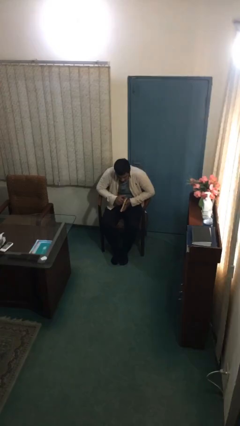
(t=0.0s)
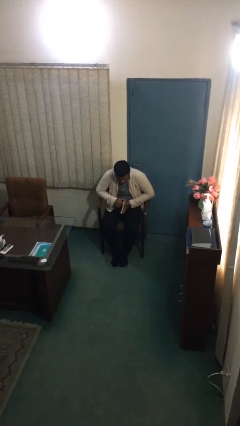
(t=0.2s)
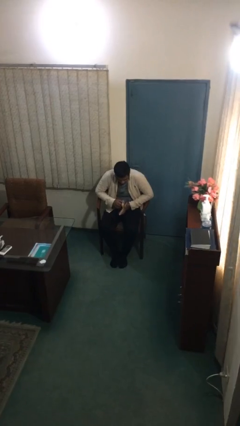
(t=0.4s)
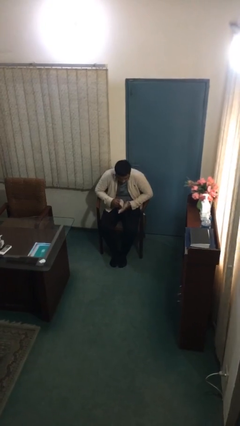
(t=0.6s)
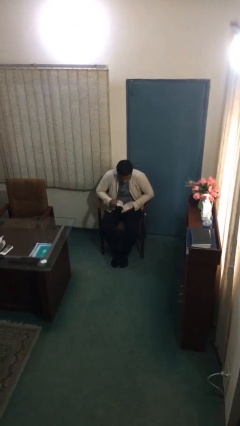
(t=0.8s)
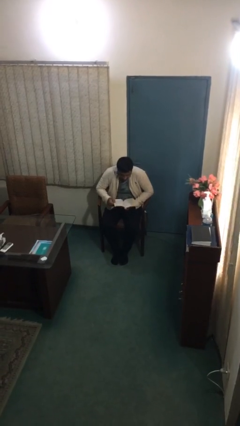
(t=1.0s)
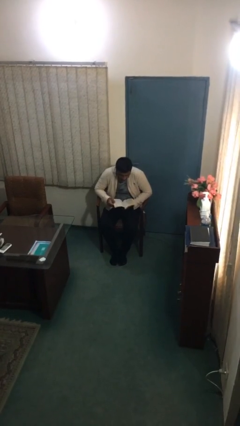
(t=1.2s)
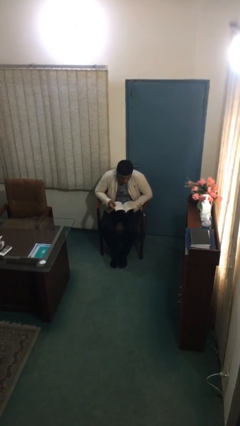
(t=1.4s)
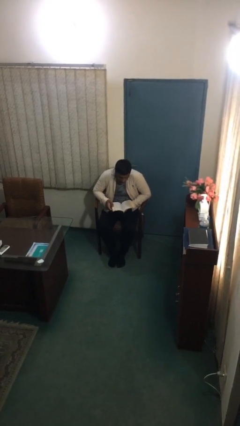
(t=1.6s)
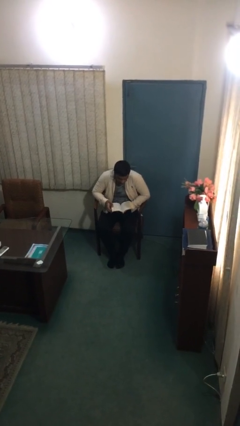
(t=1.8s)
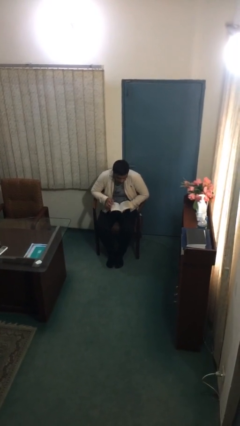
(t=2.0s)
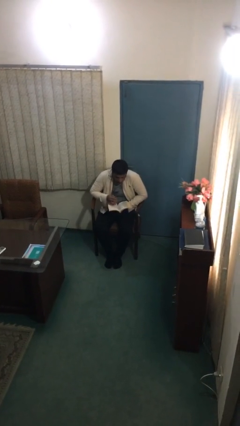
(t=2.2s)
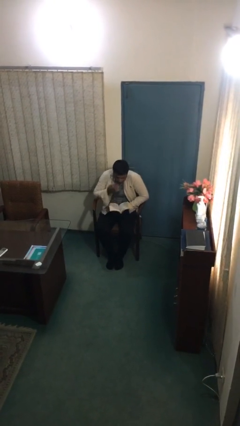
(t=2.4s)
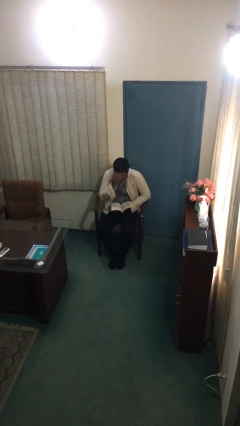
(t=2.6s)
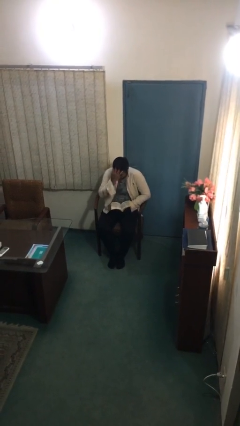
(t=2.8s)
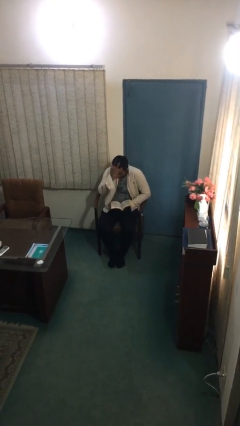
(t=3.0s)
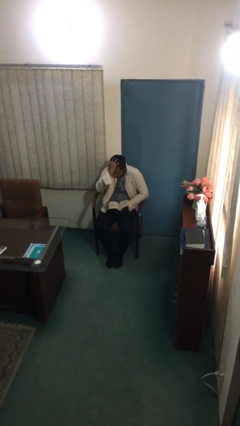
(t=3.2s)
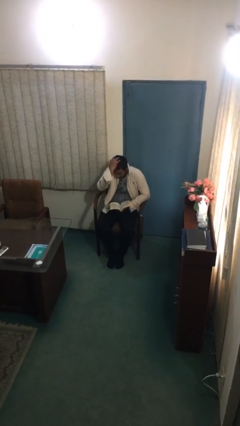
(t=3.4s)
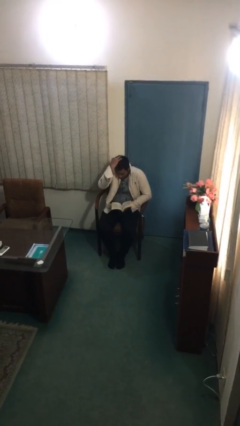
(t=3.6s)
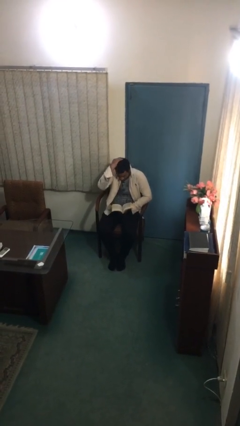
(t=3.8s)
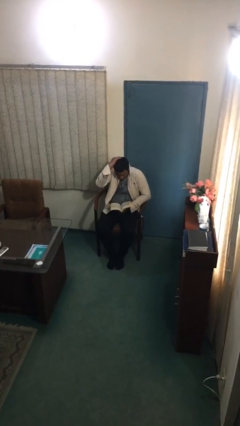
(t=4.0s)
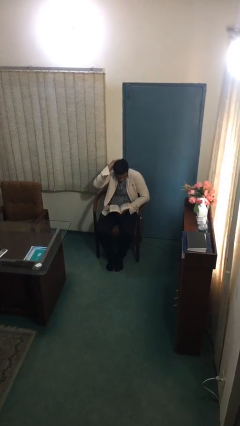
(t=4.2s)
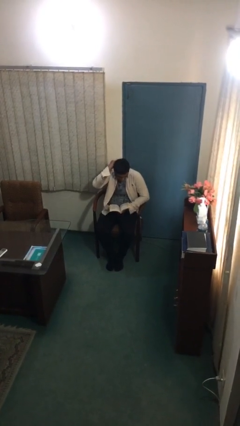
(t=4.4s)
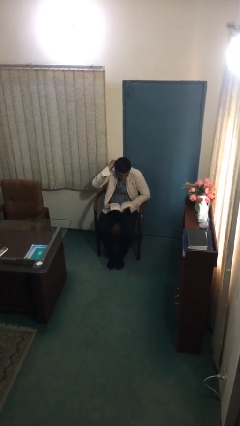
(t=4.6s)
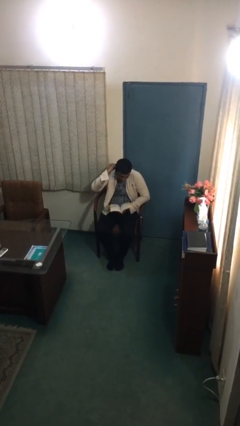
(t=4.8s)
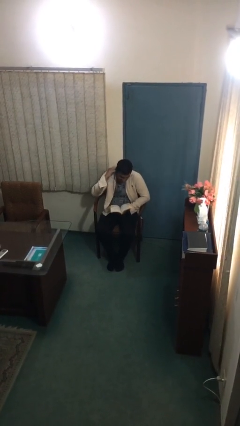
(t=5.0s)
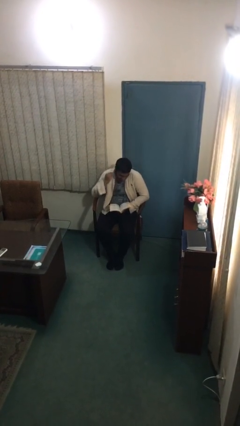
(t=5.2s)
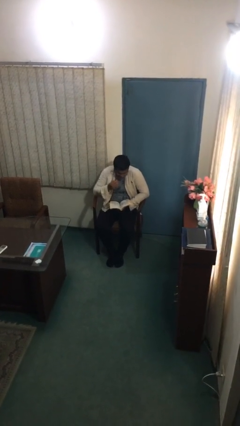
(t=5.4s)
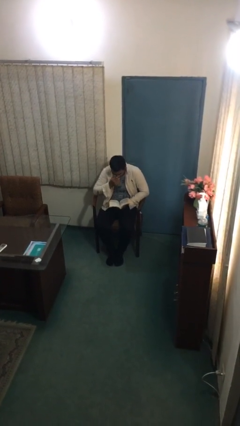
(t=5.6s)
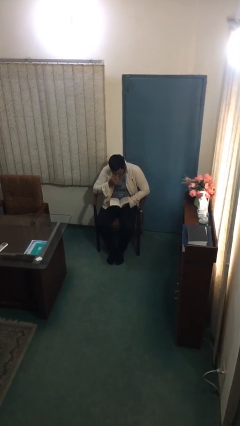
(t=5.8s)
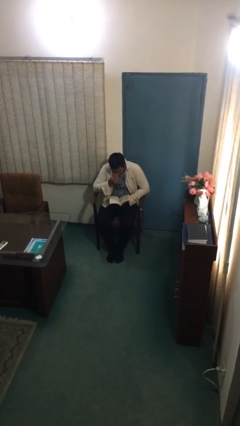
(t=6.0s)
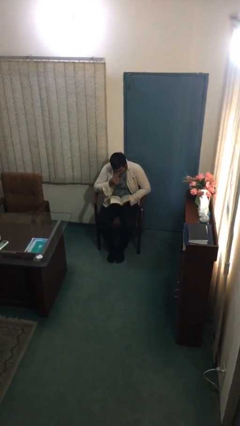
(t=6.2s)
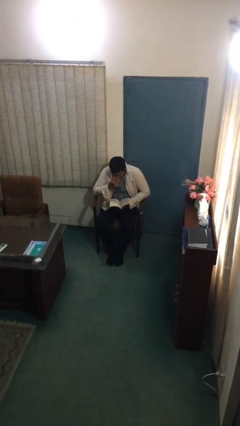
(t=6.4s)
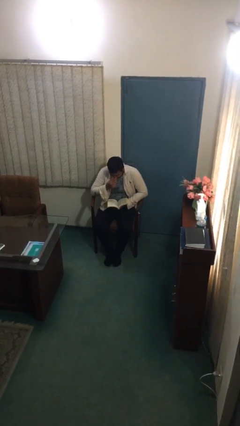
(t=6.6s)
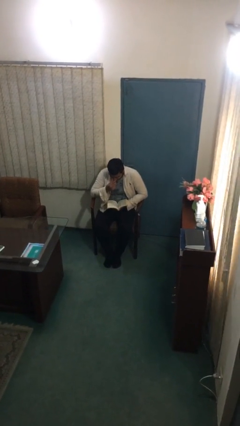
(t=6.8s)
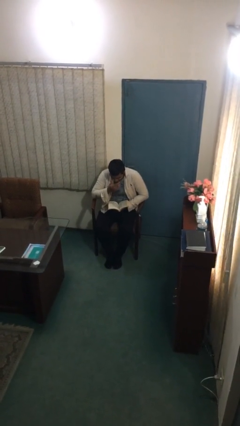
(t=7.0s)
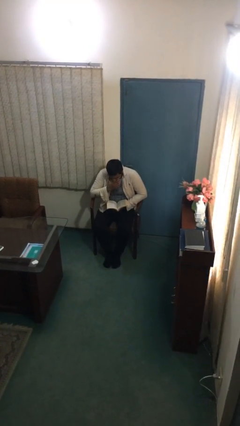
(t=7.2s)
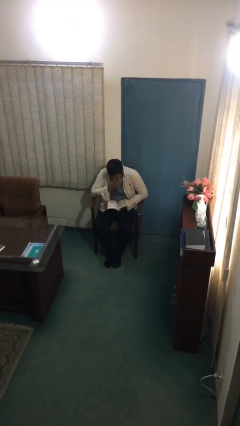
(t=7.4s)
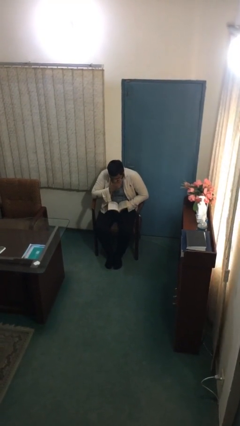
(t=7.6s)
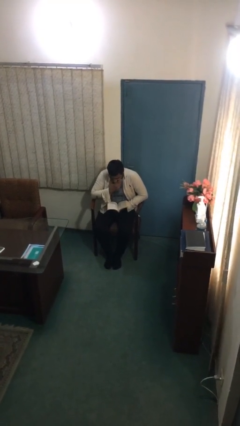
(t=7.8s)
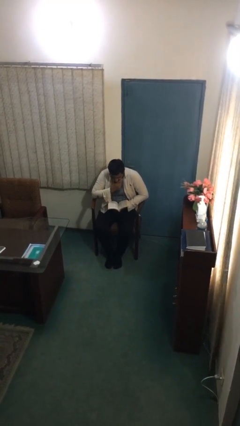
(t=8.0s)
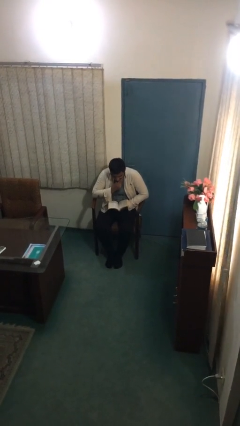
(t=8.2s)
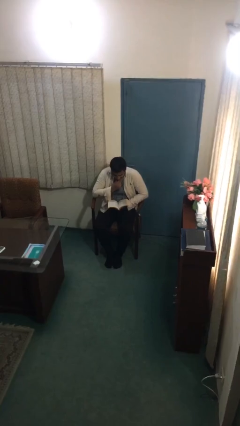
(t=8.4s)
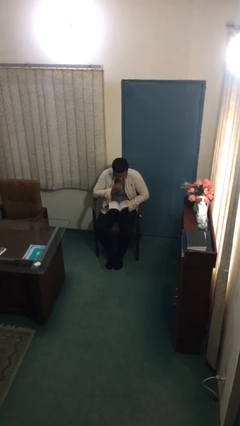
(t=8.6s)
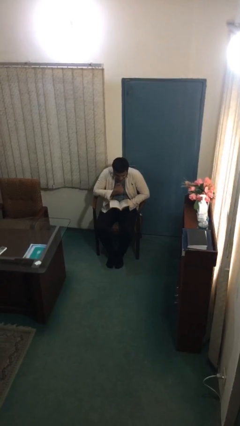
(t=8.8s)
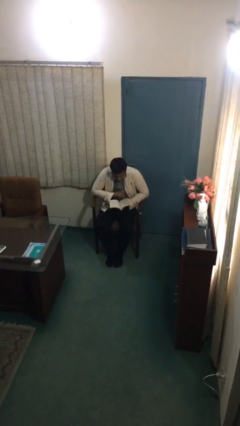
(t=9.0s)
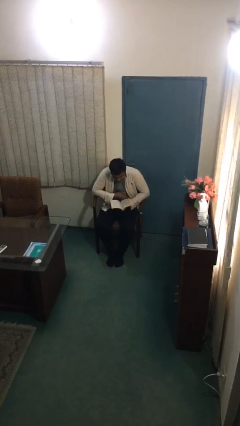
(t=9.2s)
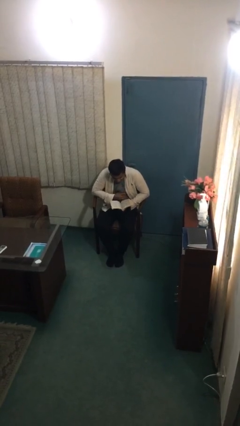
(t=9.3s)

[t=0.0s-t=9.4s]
person reads document

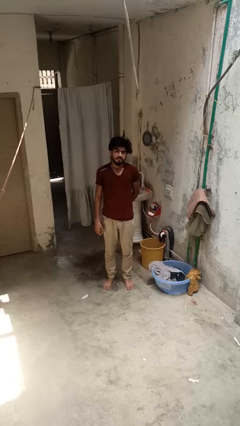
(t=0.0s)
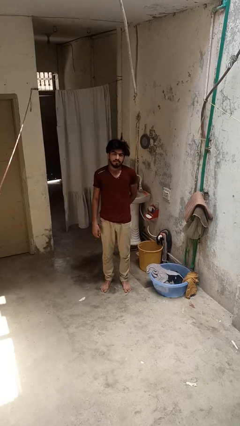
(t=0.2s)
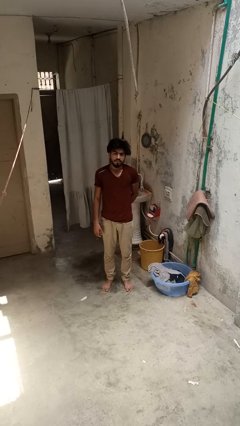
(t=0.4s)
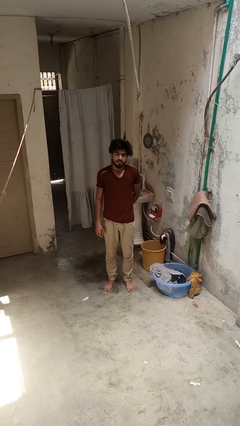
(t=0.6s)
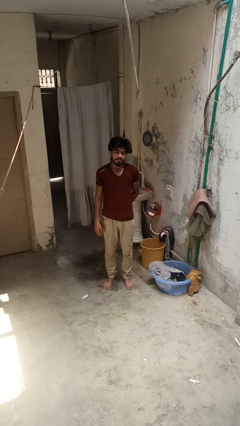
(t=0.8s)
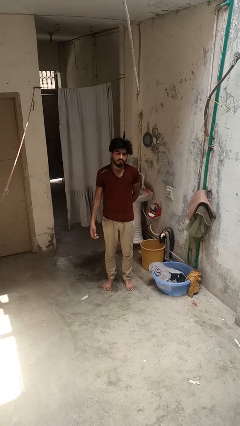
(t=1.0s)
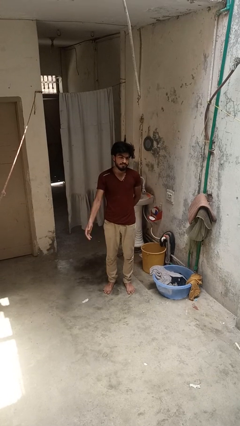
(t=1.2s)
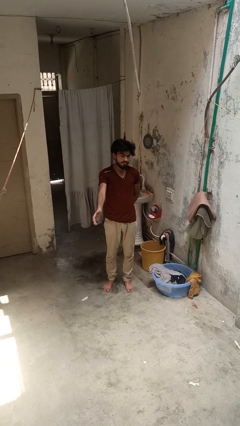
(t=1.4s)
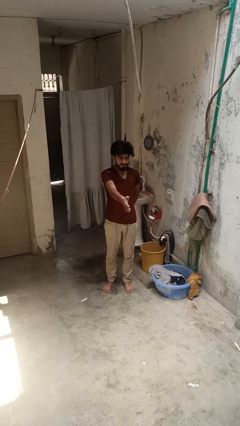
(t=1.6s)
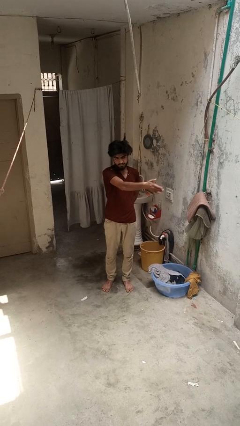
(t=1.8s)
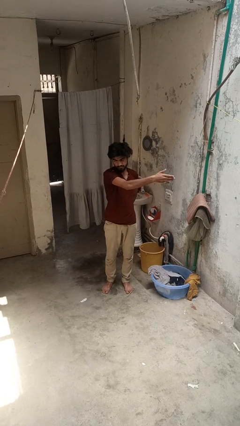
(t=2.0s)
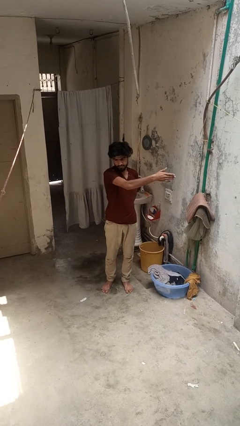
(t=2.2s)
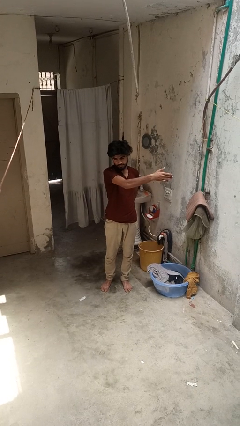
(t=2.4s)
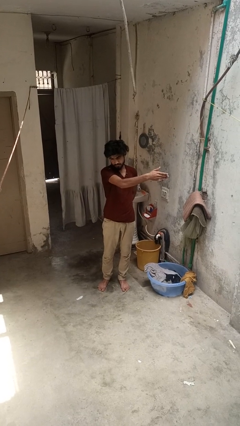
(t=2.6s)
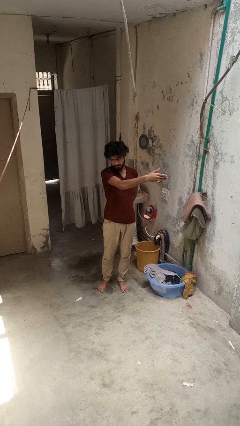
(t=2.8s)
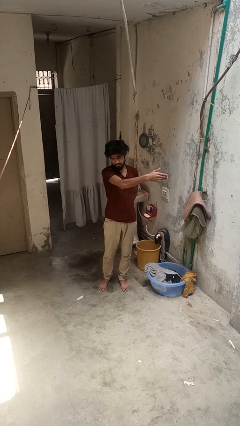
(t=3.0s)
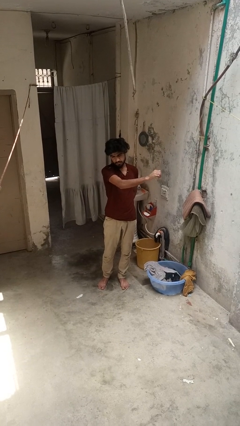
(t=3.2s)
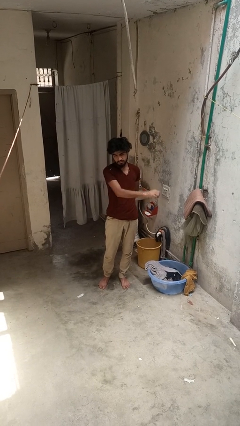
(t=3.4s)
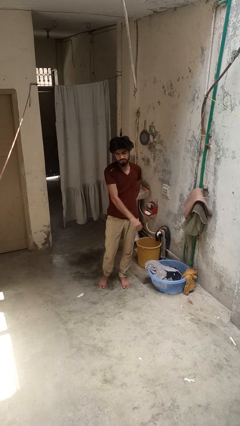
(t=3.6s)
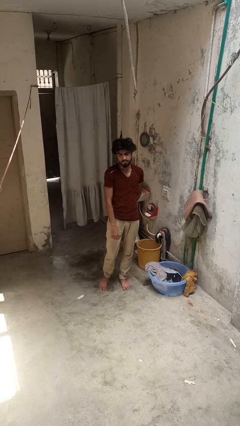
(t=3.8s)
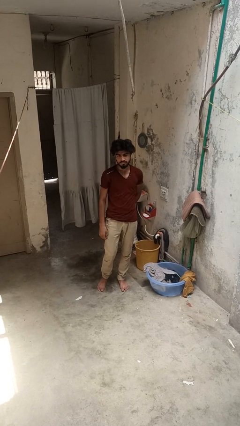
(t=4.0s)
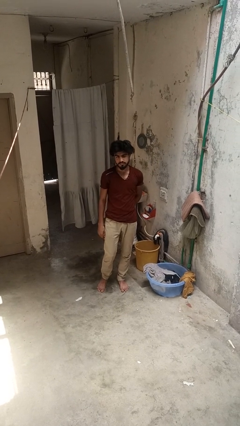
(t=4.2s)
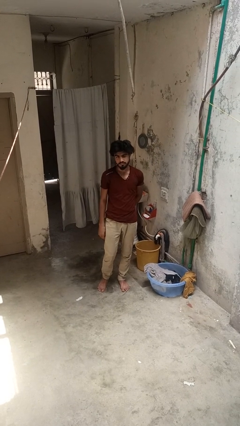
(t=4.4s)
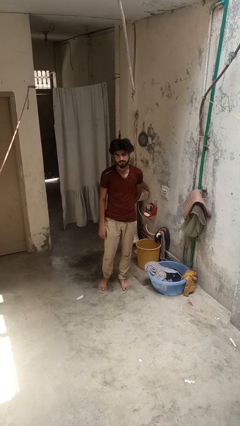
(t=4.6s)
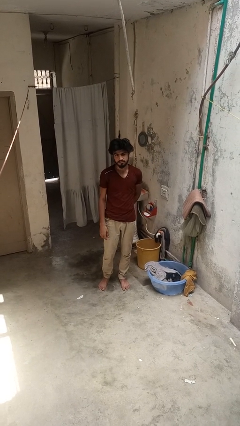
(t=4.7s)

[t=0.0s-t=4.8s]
person gestures swipe left

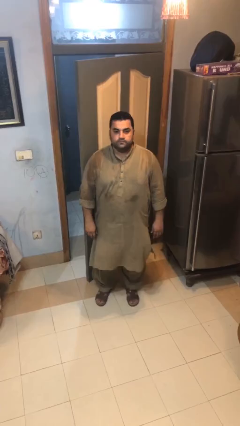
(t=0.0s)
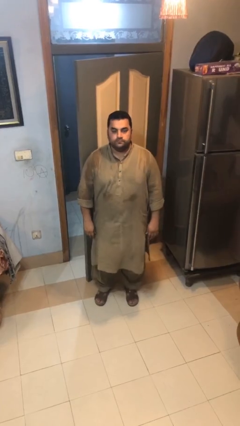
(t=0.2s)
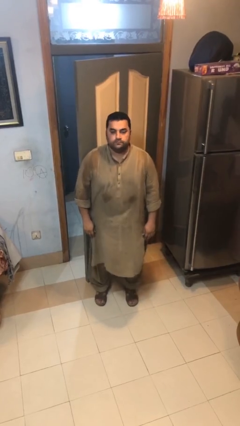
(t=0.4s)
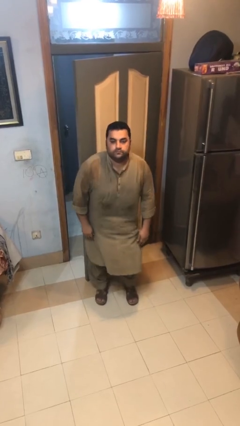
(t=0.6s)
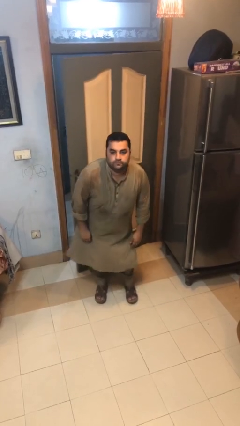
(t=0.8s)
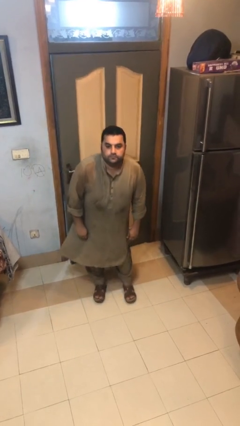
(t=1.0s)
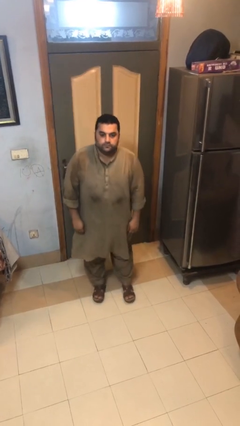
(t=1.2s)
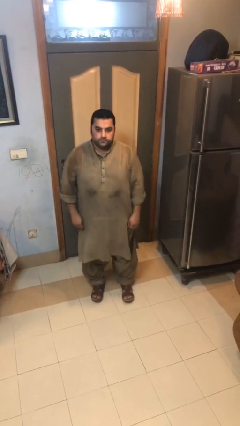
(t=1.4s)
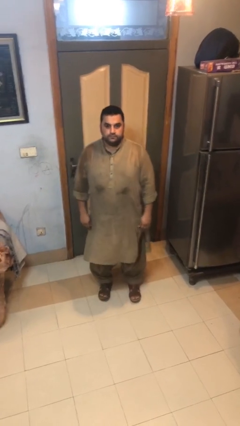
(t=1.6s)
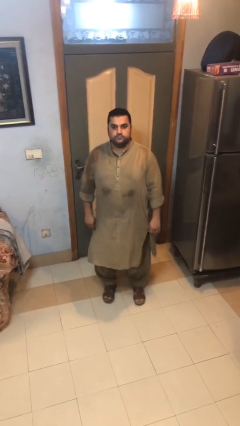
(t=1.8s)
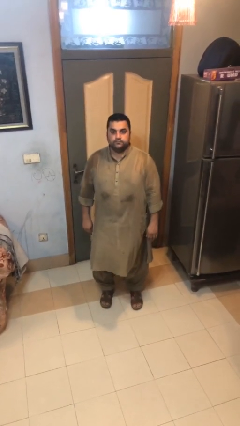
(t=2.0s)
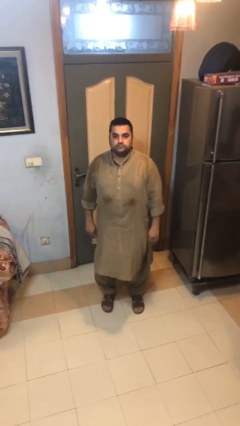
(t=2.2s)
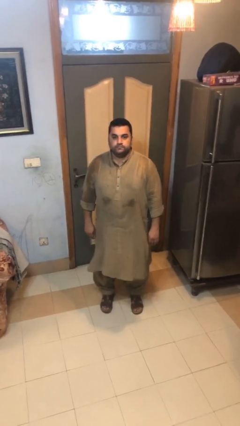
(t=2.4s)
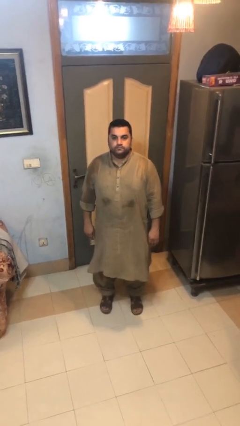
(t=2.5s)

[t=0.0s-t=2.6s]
person closes door with hip

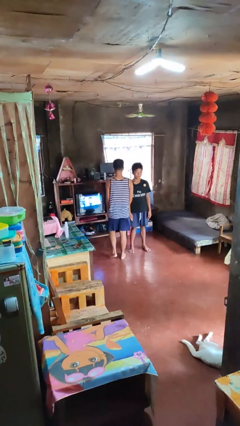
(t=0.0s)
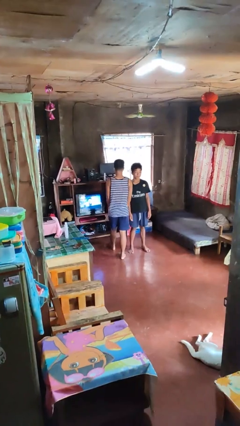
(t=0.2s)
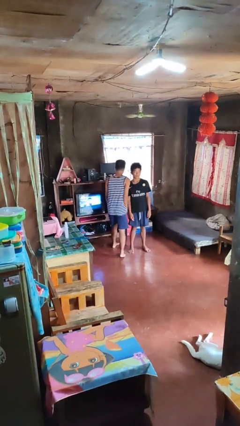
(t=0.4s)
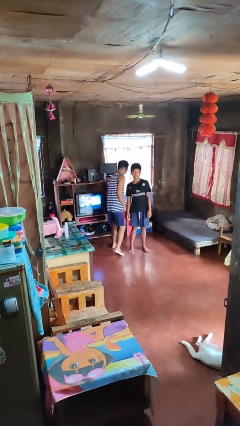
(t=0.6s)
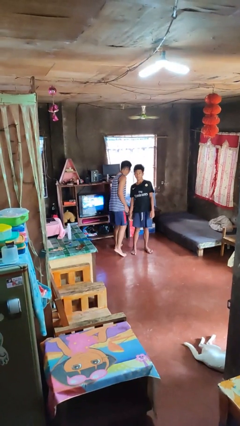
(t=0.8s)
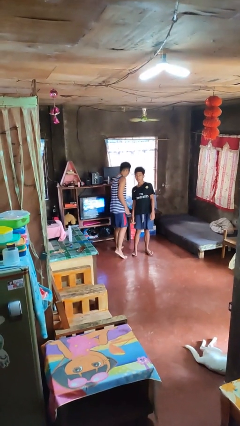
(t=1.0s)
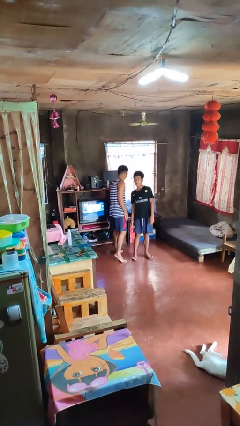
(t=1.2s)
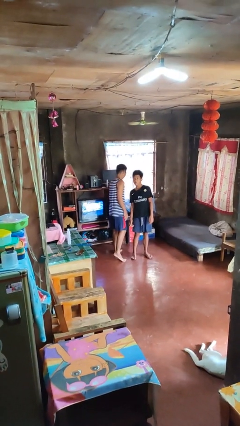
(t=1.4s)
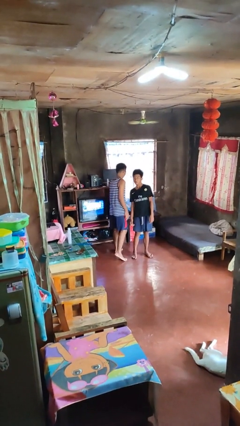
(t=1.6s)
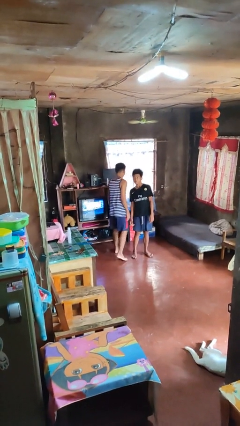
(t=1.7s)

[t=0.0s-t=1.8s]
person bumps into person
